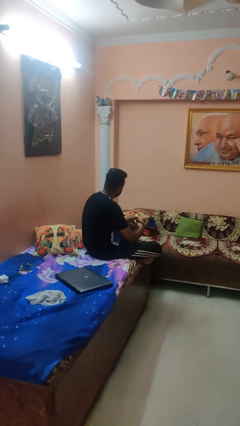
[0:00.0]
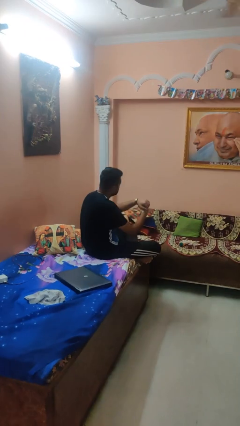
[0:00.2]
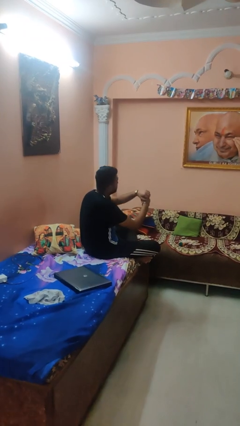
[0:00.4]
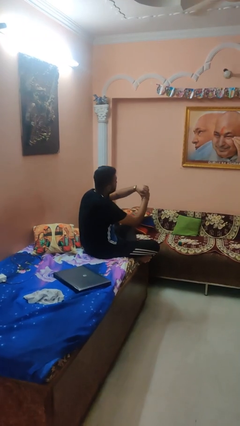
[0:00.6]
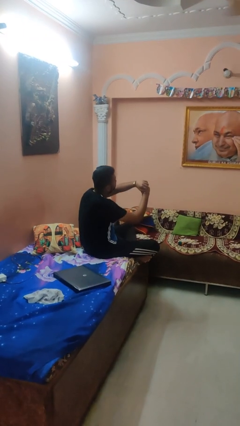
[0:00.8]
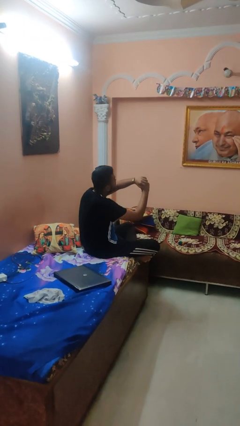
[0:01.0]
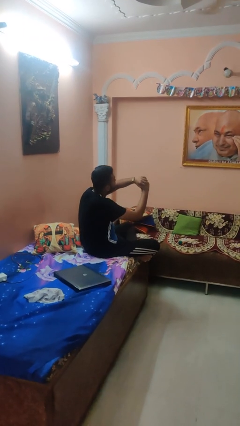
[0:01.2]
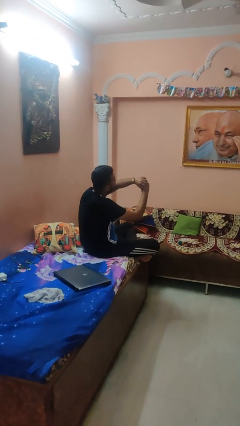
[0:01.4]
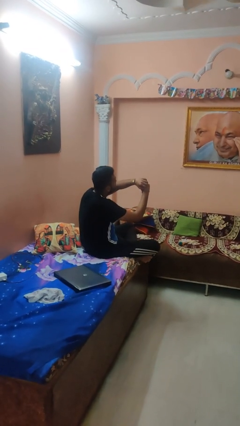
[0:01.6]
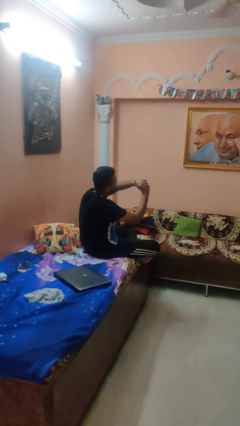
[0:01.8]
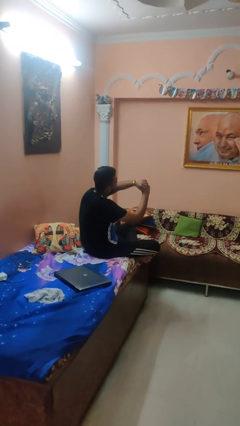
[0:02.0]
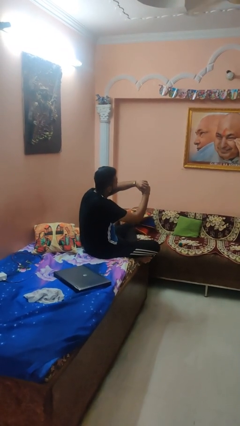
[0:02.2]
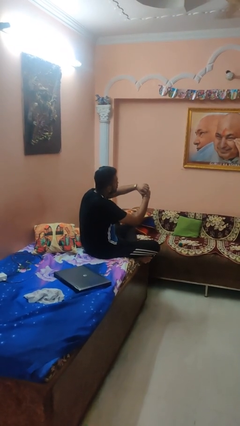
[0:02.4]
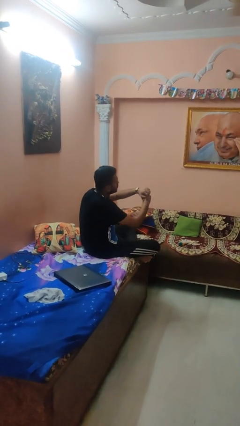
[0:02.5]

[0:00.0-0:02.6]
person looks at wristwatch

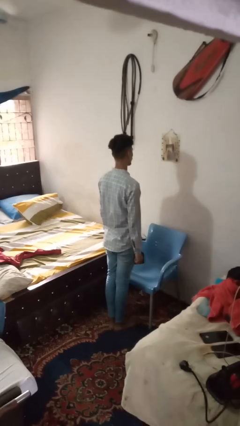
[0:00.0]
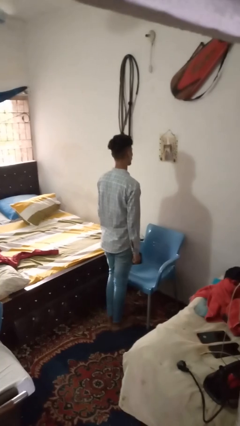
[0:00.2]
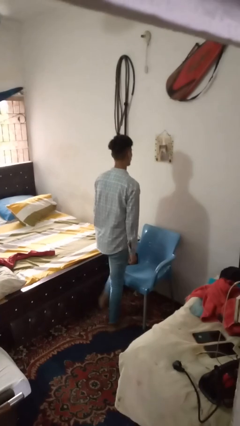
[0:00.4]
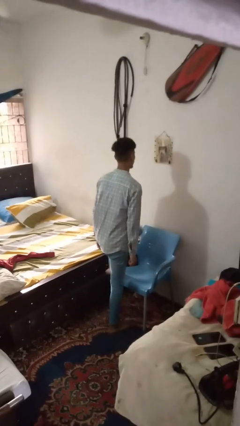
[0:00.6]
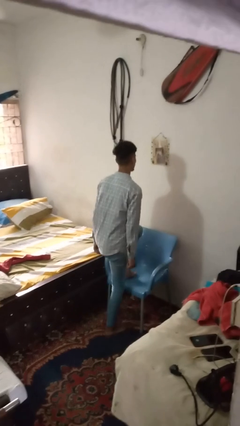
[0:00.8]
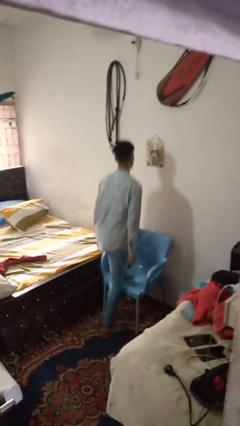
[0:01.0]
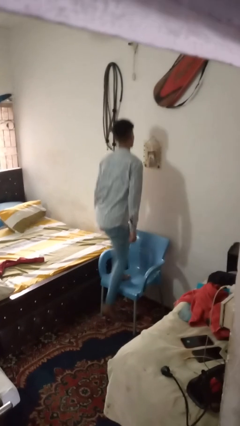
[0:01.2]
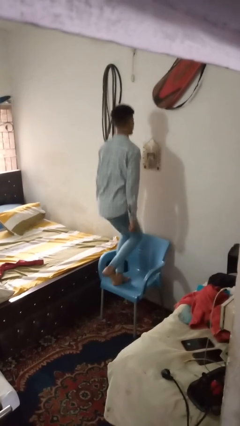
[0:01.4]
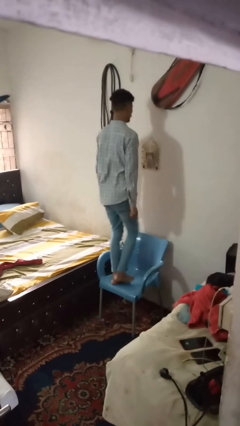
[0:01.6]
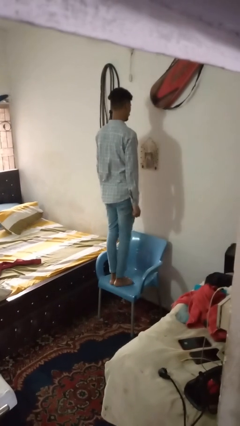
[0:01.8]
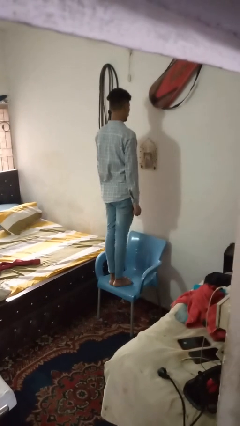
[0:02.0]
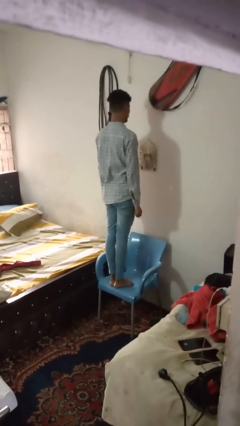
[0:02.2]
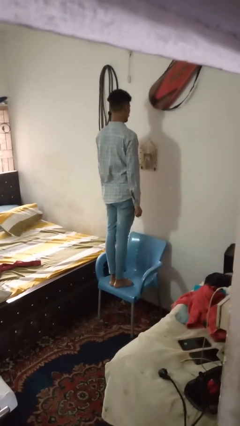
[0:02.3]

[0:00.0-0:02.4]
person climbs on chair

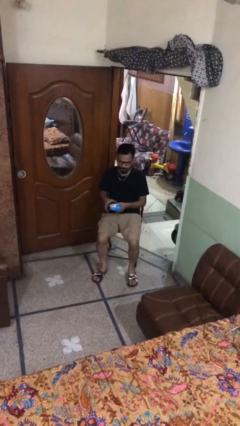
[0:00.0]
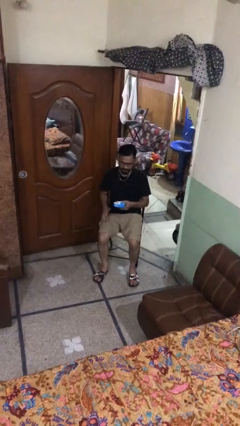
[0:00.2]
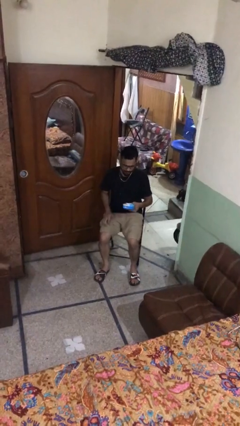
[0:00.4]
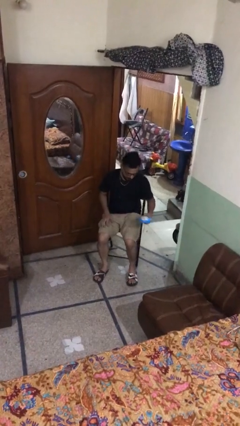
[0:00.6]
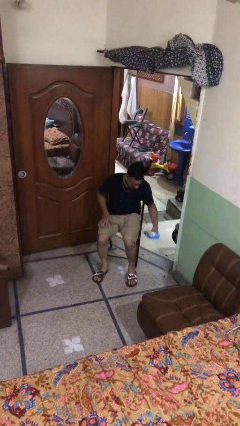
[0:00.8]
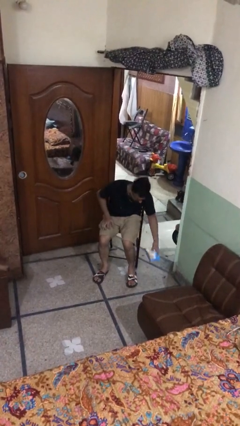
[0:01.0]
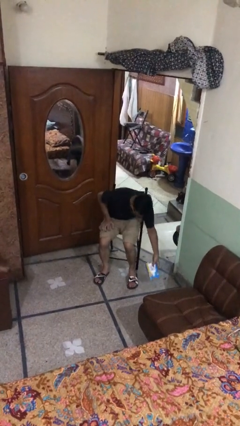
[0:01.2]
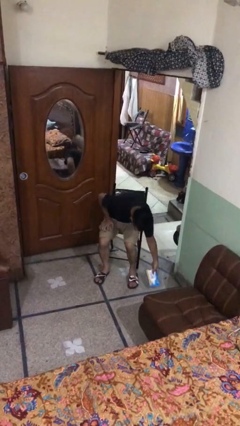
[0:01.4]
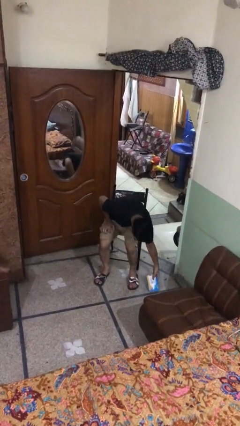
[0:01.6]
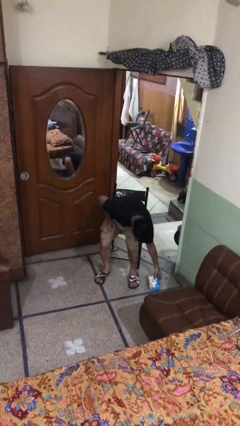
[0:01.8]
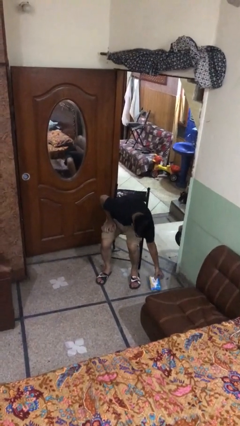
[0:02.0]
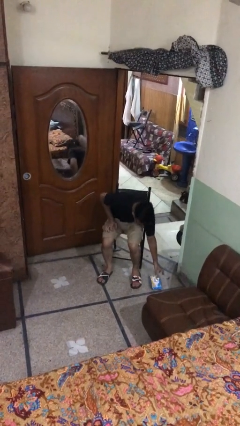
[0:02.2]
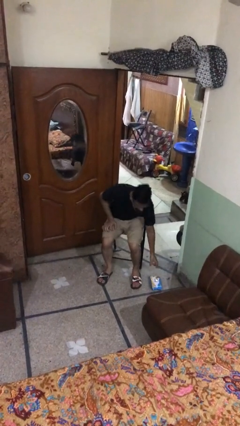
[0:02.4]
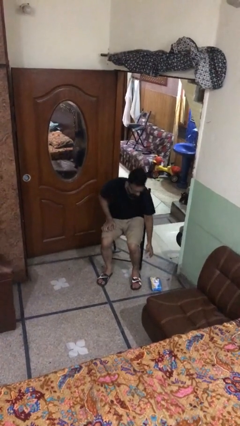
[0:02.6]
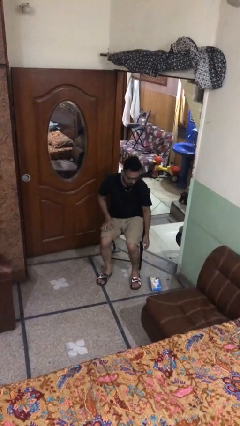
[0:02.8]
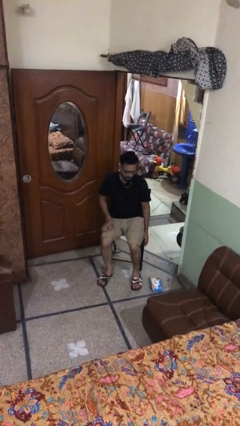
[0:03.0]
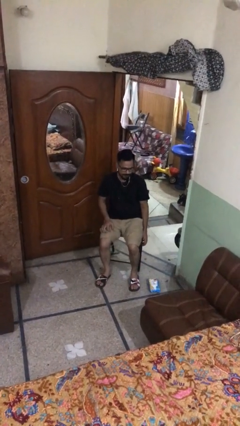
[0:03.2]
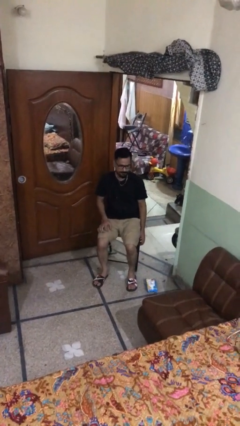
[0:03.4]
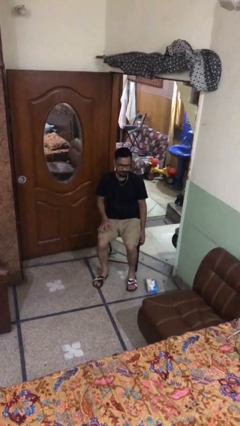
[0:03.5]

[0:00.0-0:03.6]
person puts down object on floor

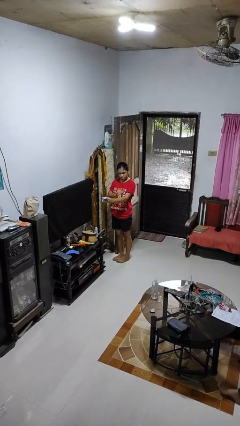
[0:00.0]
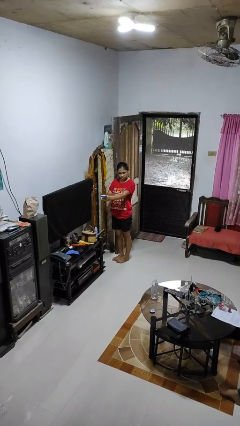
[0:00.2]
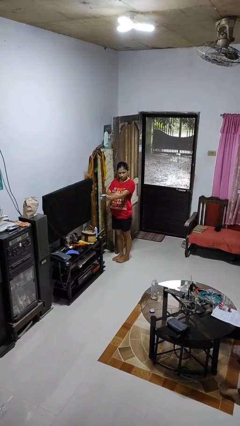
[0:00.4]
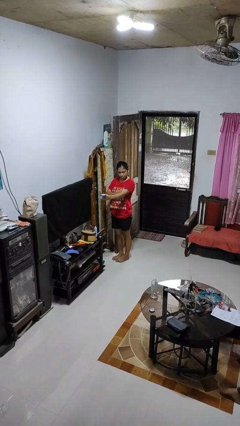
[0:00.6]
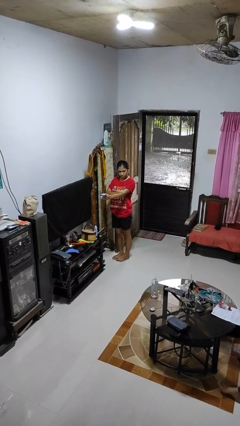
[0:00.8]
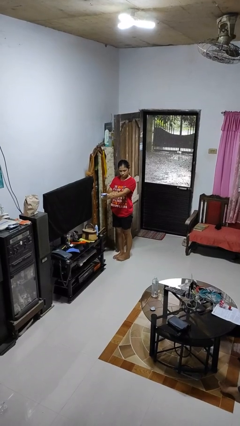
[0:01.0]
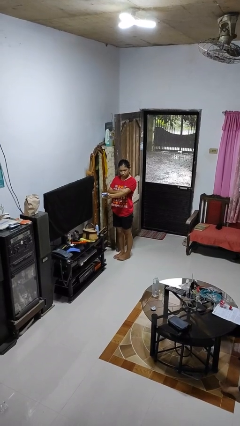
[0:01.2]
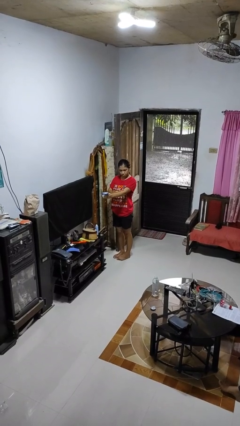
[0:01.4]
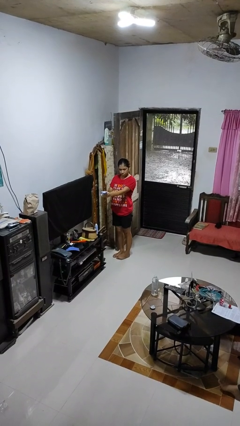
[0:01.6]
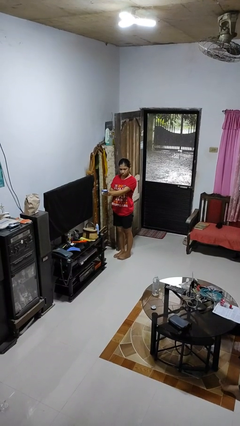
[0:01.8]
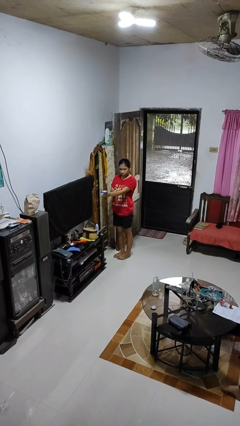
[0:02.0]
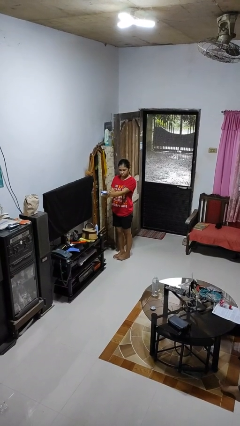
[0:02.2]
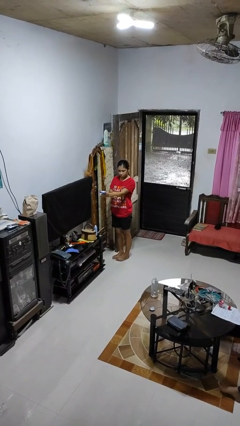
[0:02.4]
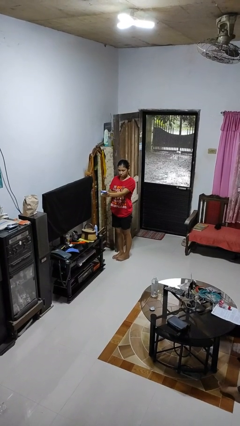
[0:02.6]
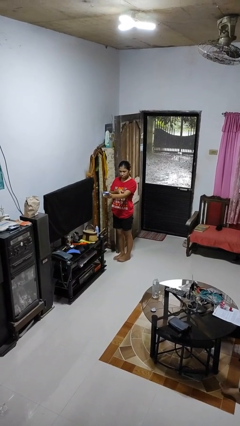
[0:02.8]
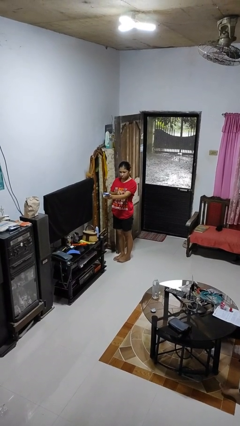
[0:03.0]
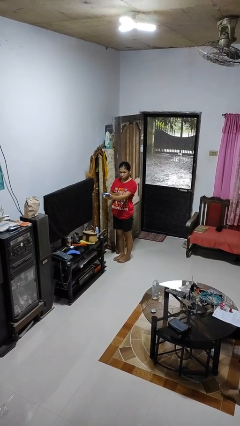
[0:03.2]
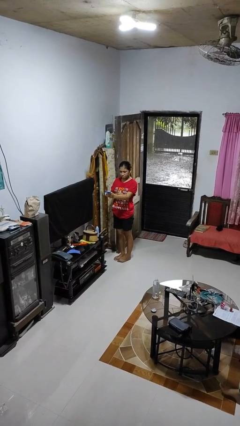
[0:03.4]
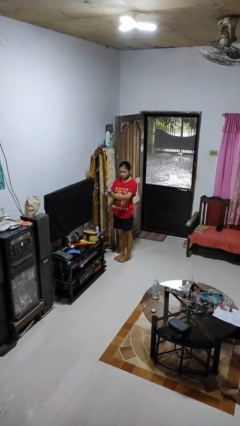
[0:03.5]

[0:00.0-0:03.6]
person applies sunscreen

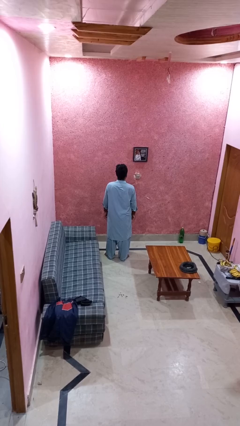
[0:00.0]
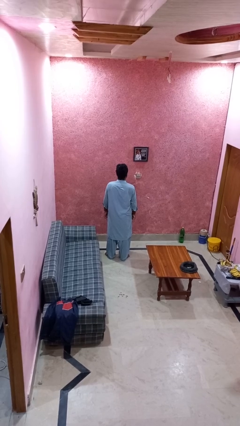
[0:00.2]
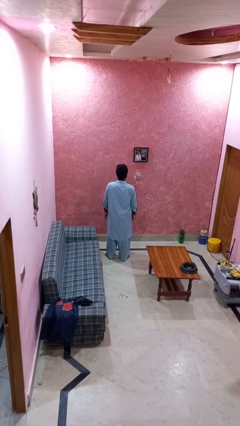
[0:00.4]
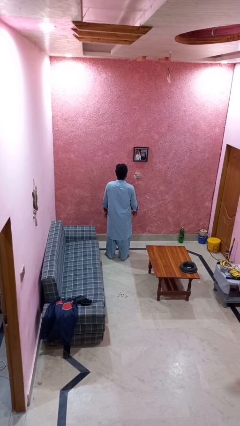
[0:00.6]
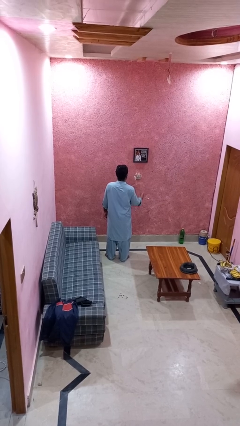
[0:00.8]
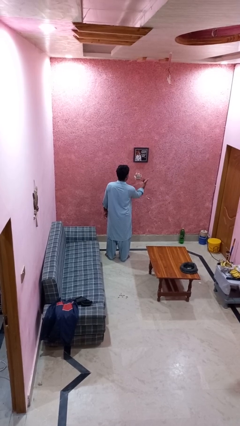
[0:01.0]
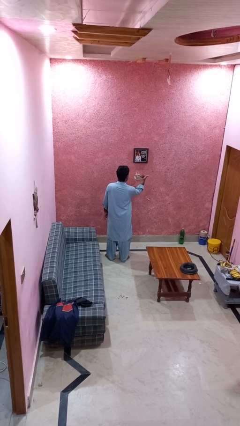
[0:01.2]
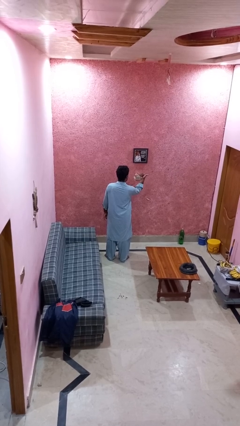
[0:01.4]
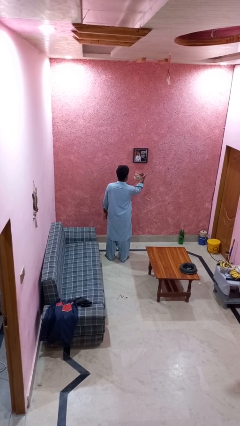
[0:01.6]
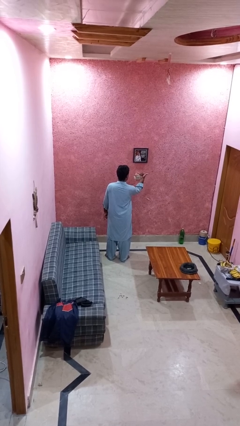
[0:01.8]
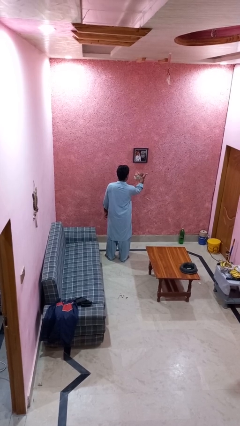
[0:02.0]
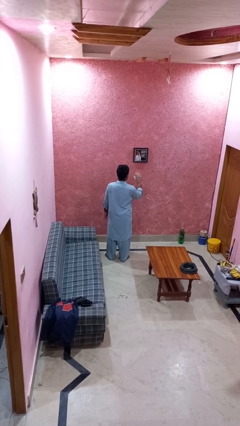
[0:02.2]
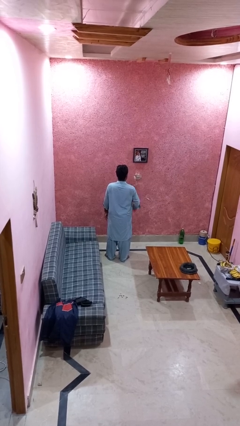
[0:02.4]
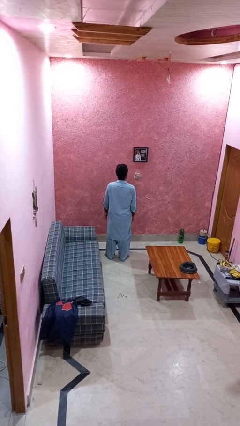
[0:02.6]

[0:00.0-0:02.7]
person gestures hang loose

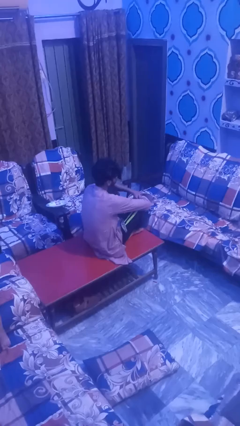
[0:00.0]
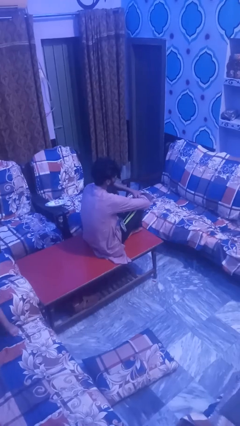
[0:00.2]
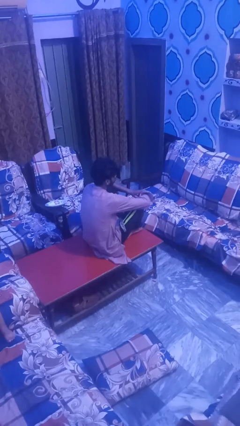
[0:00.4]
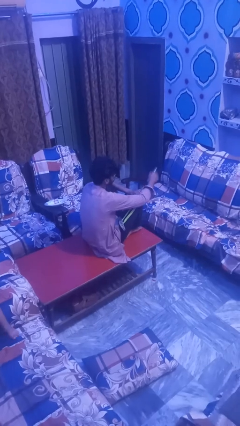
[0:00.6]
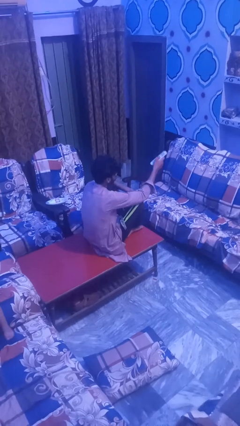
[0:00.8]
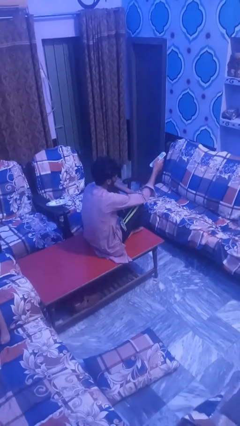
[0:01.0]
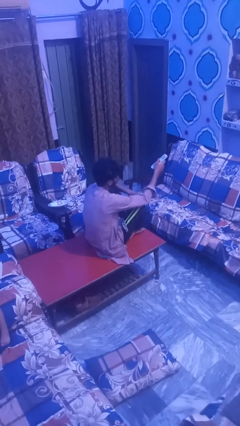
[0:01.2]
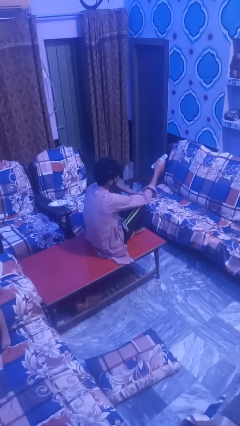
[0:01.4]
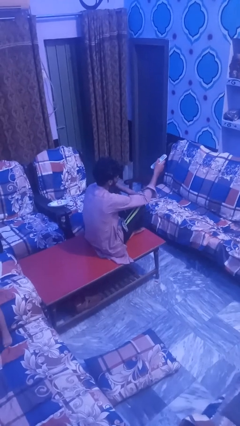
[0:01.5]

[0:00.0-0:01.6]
person uses television remote

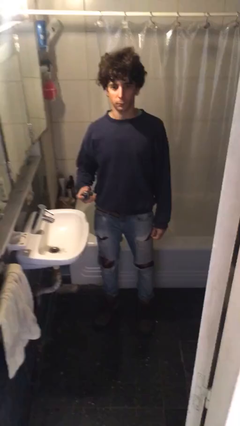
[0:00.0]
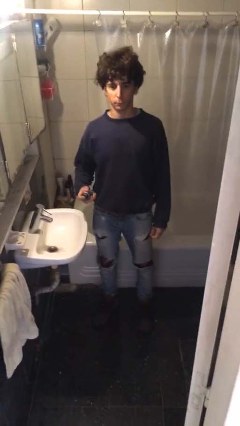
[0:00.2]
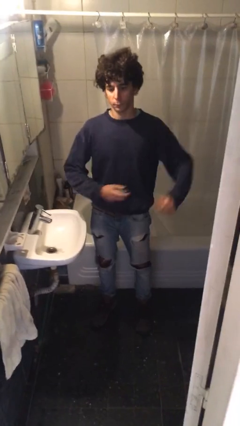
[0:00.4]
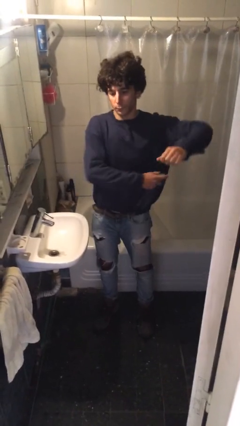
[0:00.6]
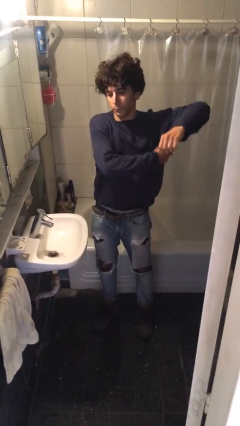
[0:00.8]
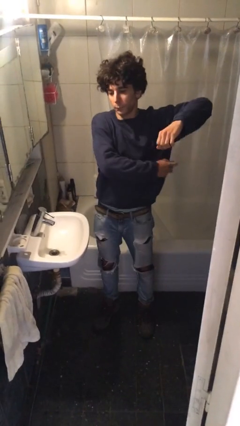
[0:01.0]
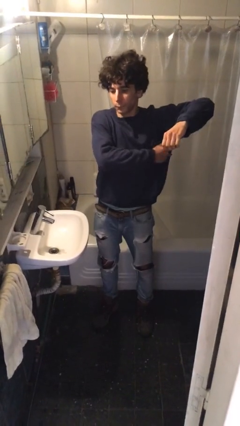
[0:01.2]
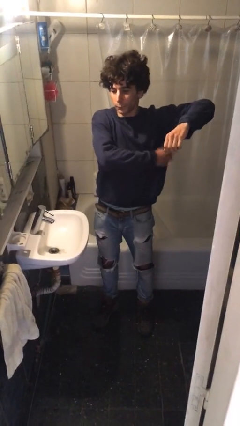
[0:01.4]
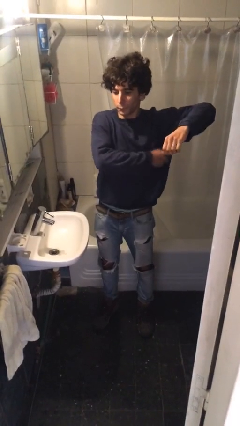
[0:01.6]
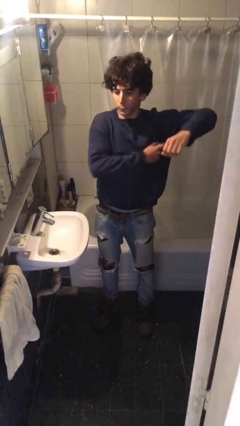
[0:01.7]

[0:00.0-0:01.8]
person applies deodorant
